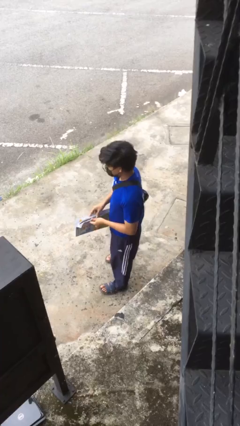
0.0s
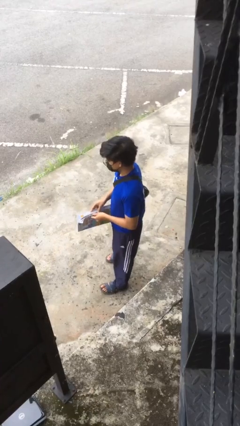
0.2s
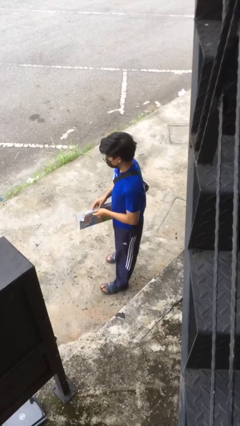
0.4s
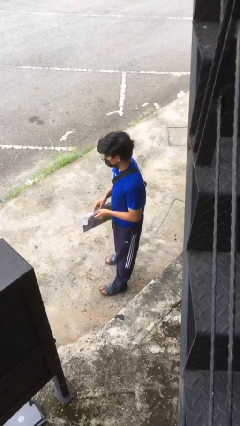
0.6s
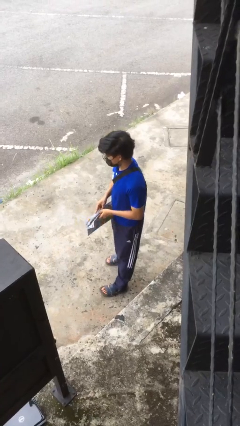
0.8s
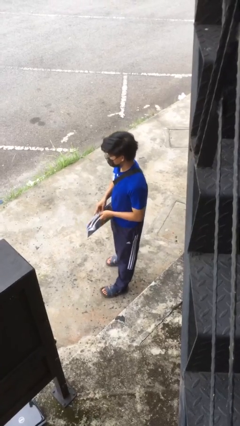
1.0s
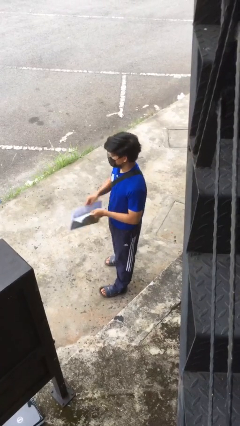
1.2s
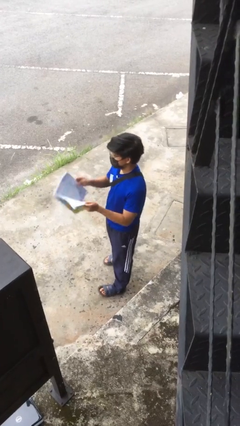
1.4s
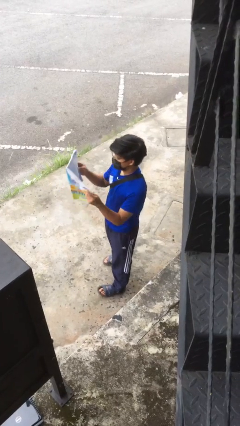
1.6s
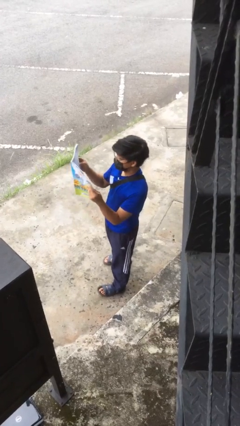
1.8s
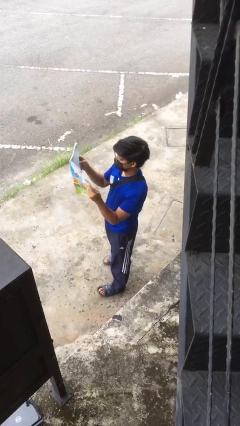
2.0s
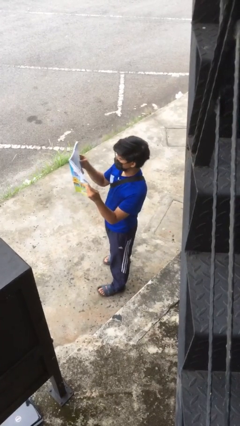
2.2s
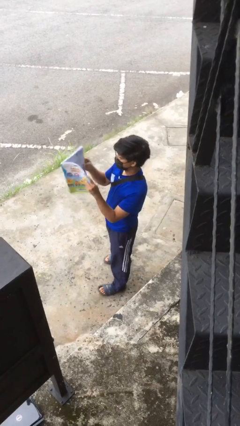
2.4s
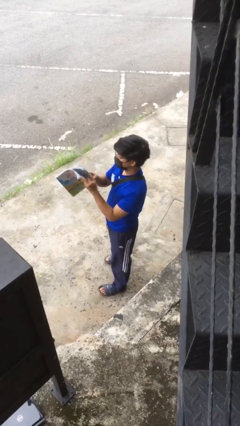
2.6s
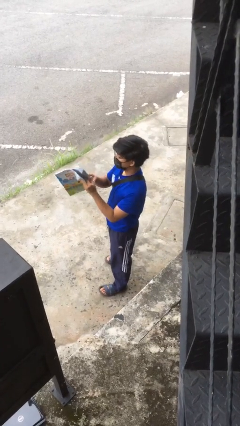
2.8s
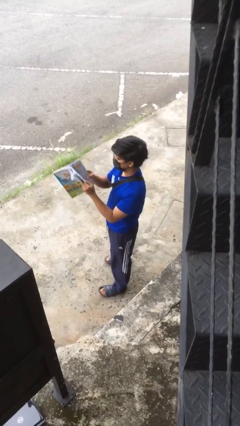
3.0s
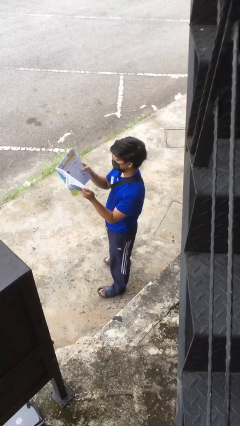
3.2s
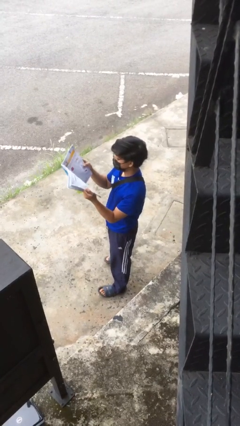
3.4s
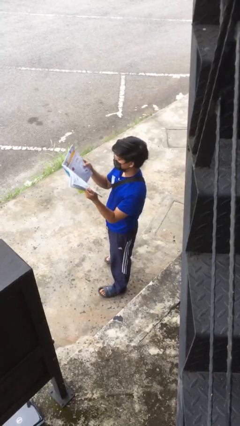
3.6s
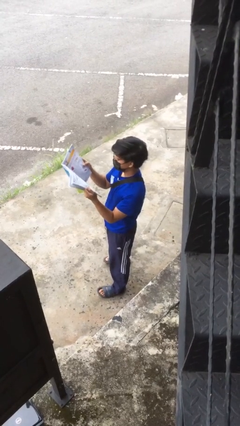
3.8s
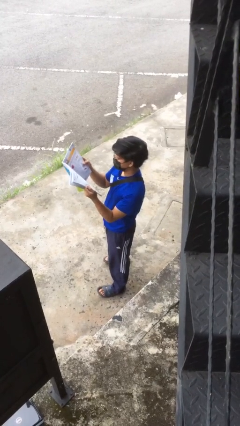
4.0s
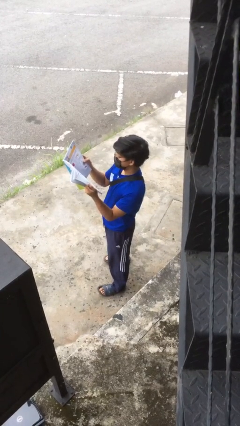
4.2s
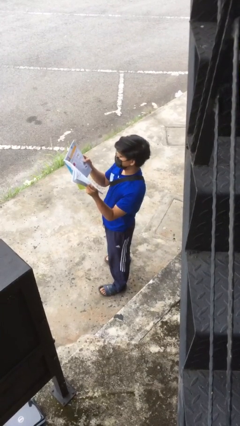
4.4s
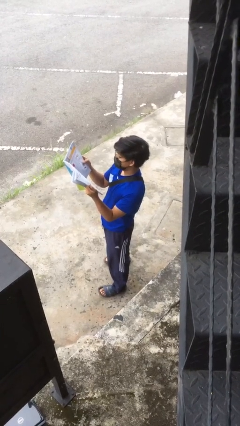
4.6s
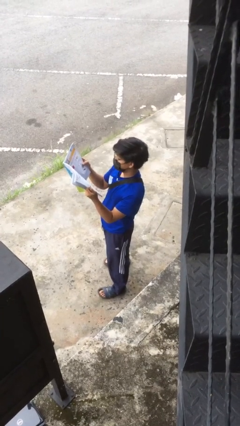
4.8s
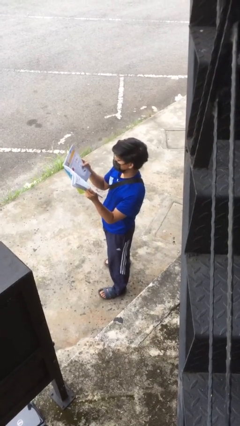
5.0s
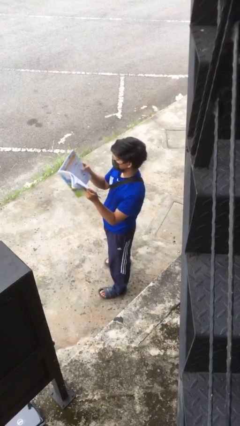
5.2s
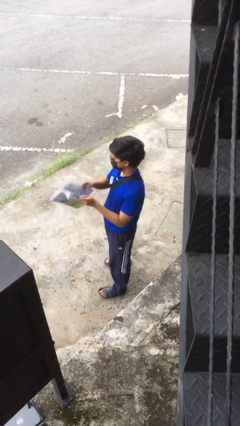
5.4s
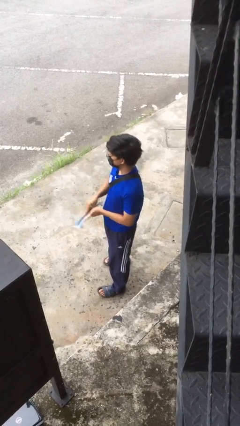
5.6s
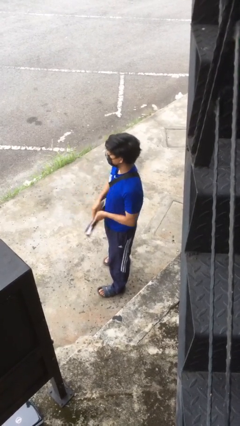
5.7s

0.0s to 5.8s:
person reads document

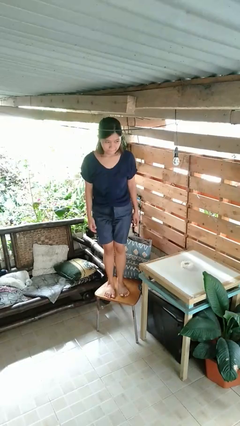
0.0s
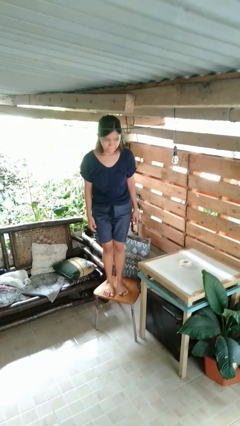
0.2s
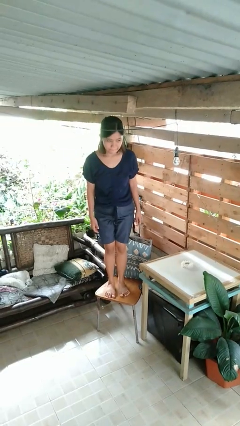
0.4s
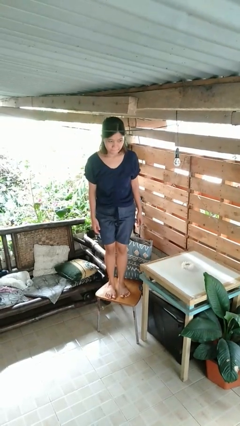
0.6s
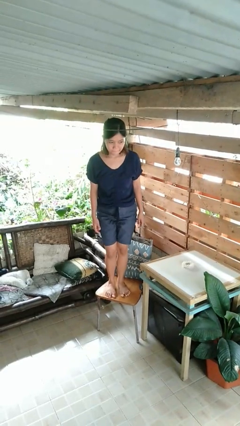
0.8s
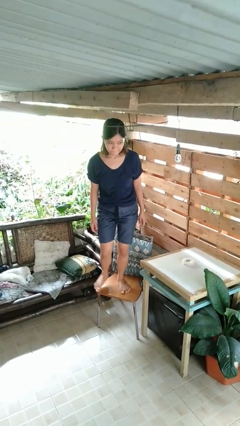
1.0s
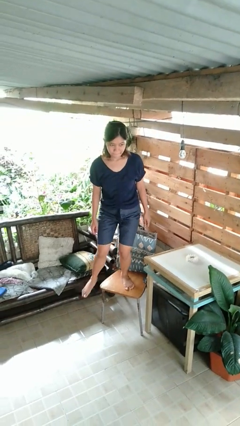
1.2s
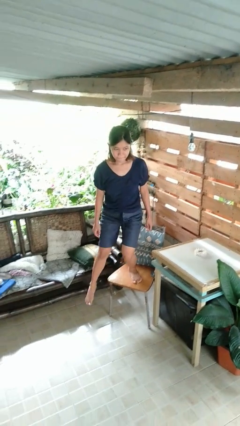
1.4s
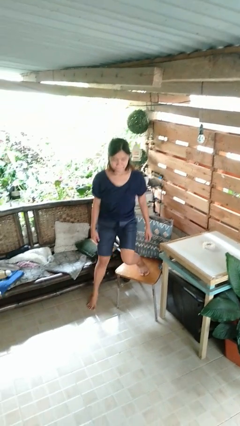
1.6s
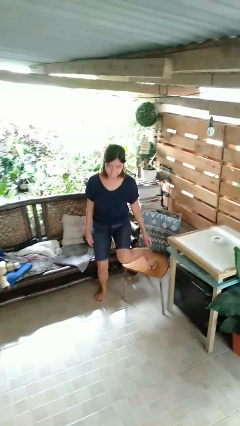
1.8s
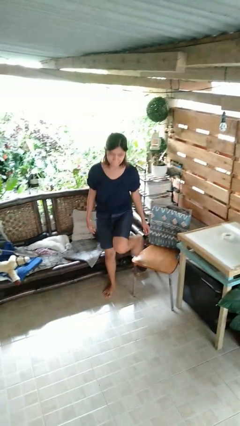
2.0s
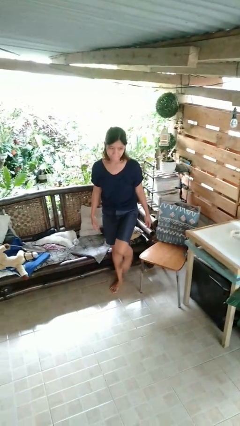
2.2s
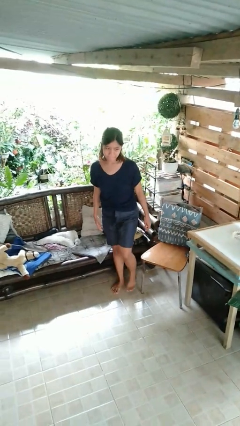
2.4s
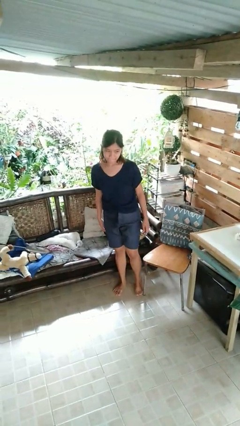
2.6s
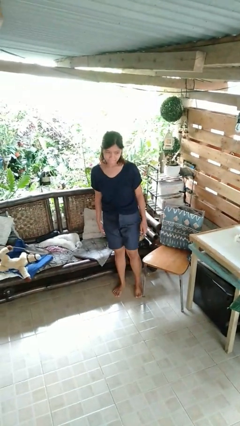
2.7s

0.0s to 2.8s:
person climbs off chair

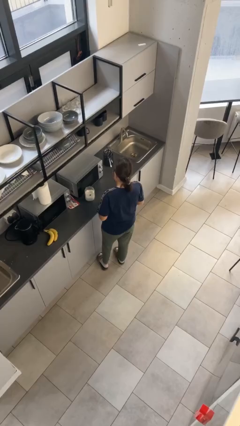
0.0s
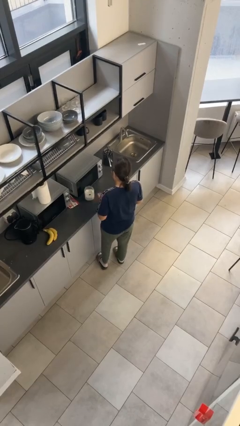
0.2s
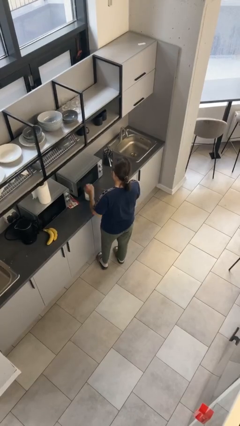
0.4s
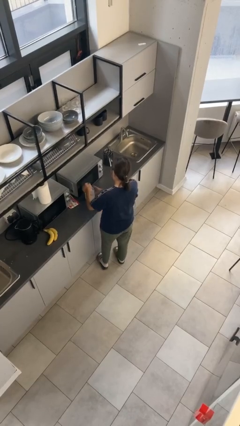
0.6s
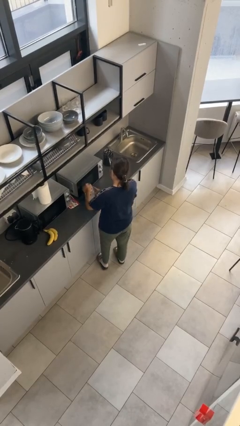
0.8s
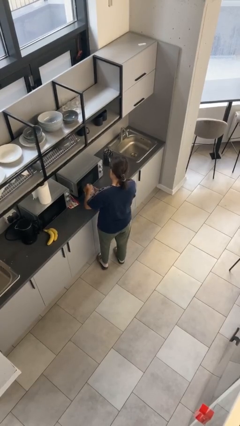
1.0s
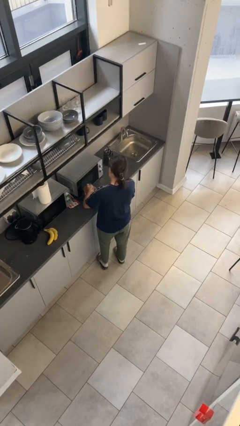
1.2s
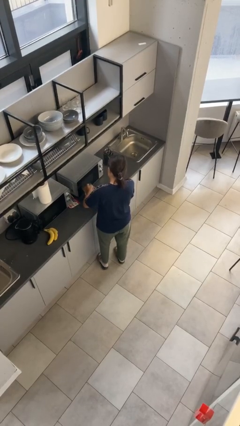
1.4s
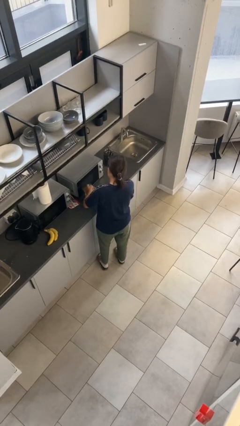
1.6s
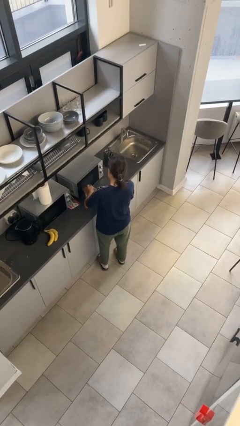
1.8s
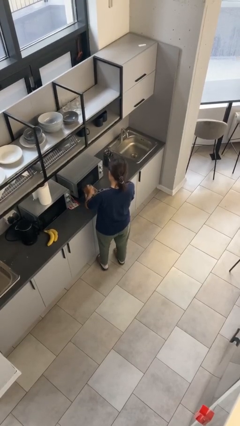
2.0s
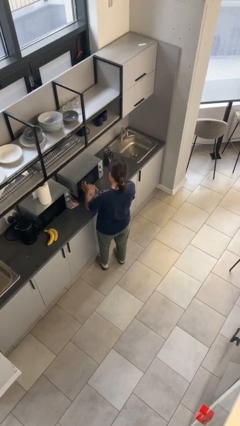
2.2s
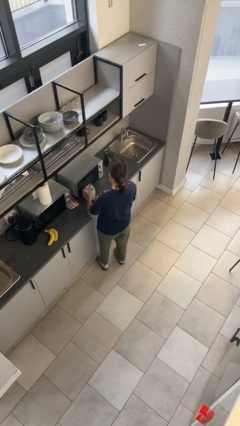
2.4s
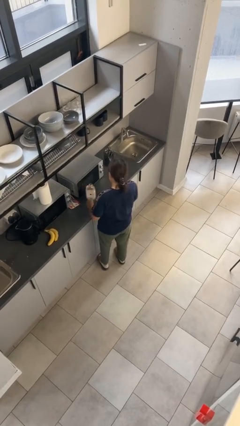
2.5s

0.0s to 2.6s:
person closes jar

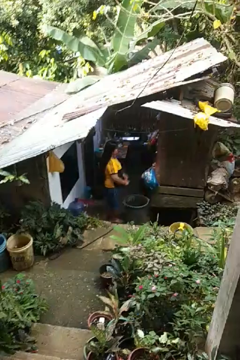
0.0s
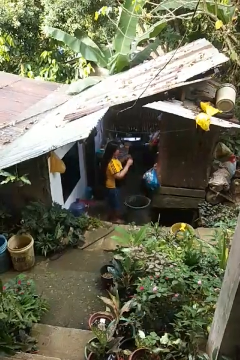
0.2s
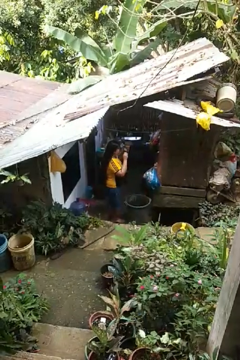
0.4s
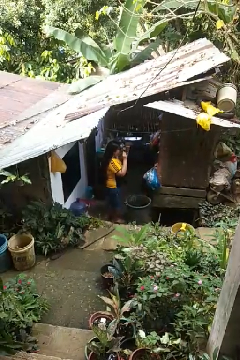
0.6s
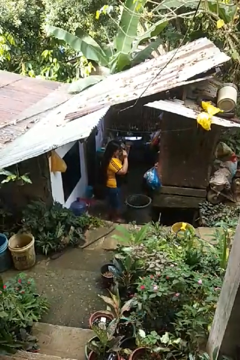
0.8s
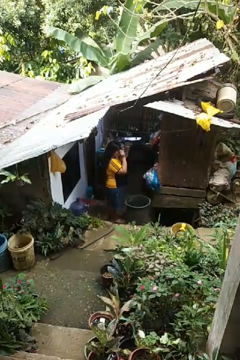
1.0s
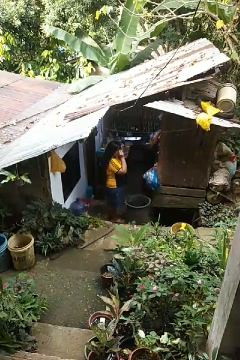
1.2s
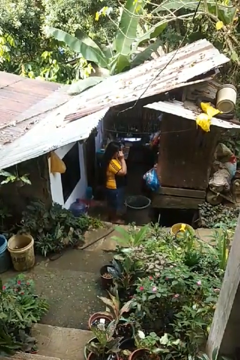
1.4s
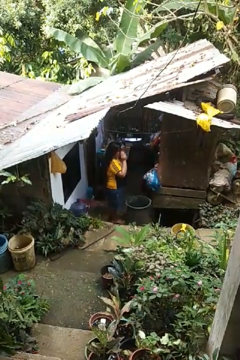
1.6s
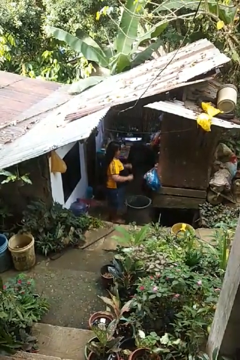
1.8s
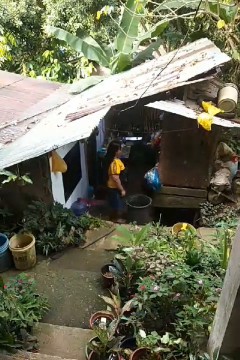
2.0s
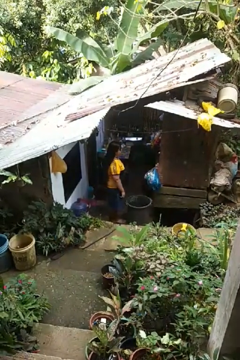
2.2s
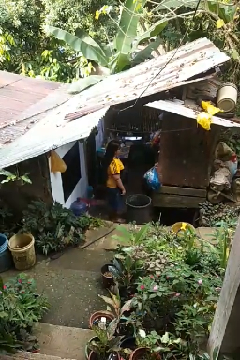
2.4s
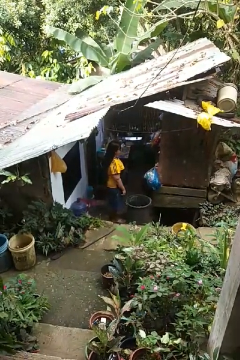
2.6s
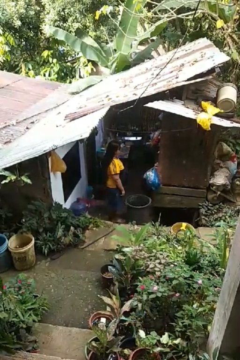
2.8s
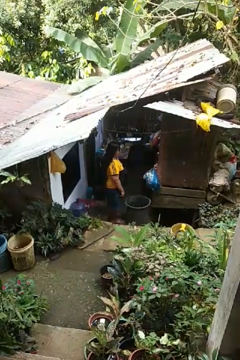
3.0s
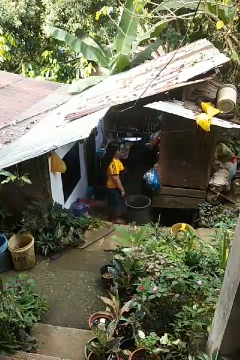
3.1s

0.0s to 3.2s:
person puts on sunglasses

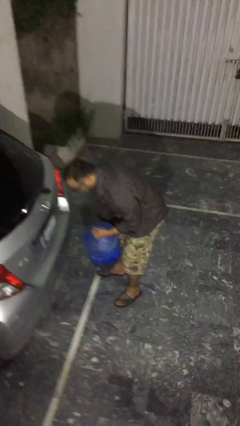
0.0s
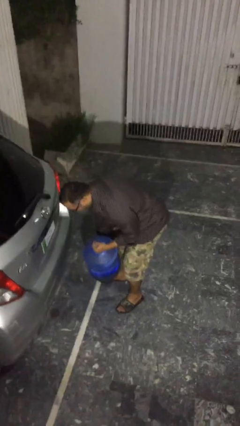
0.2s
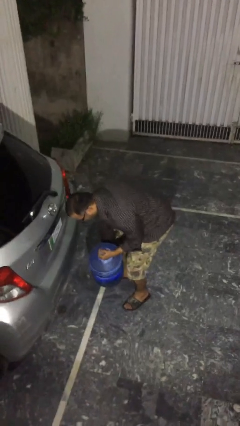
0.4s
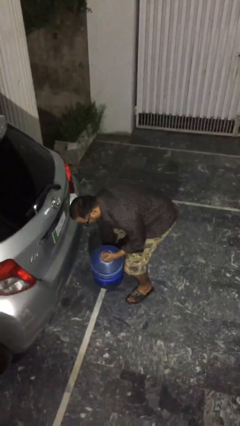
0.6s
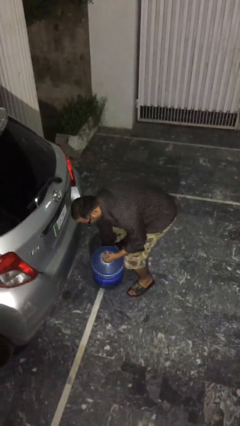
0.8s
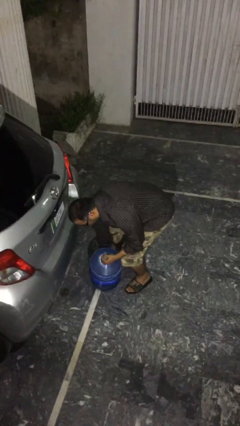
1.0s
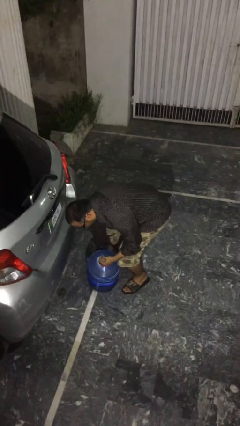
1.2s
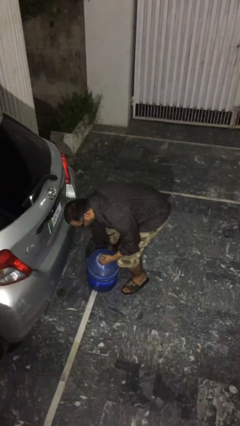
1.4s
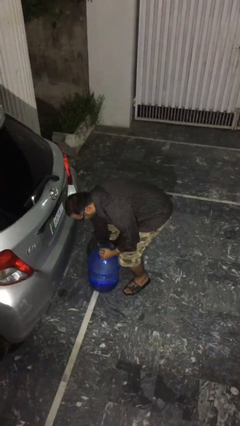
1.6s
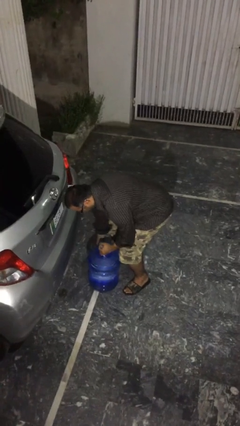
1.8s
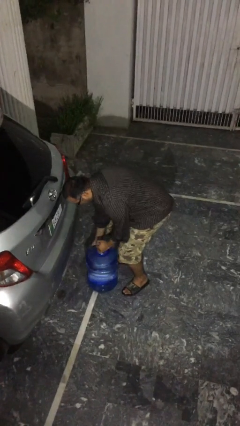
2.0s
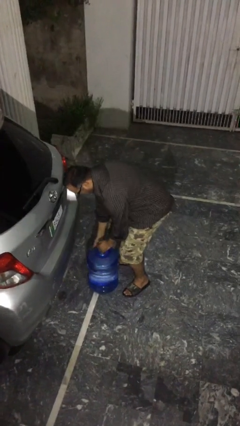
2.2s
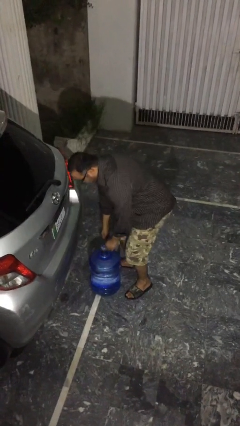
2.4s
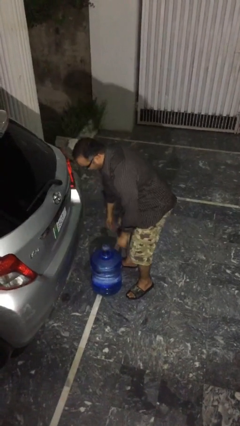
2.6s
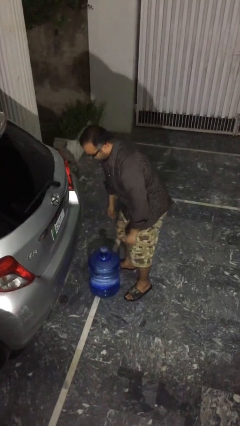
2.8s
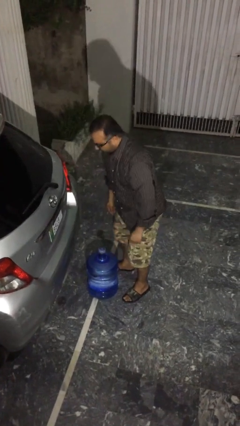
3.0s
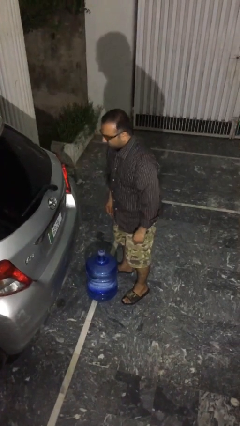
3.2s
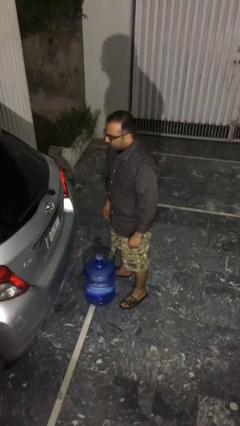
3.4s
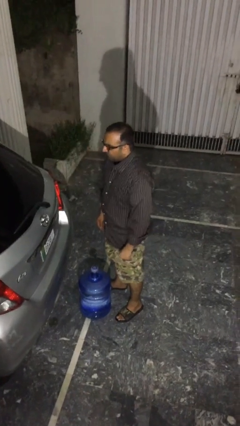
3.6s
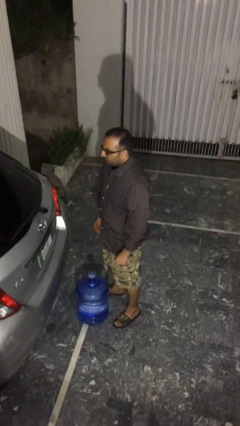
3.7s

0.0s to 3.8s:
person puts down object on floor
